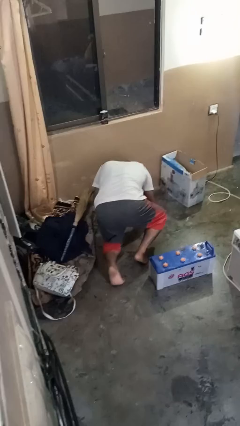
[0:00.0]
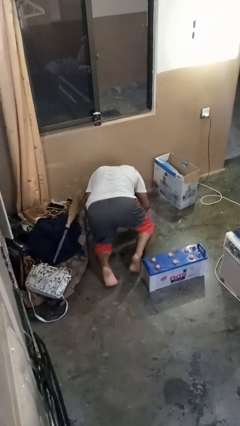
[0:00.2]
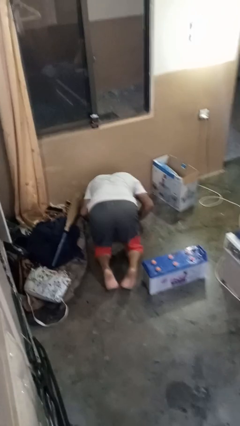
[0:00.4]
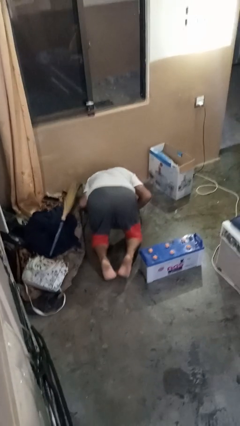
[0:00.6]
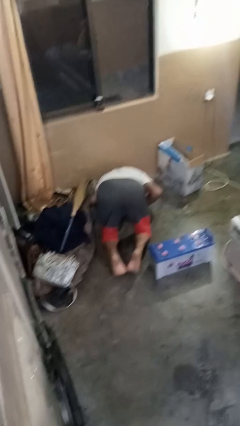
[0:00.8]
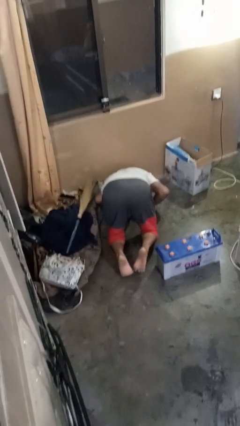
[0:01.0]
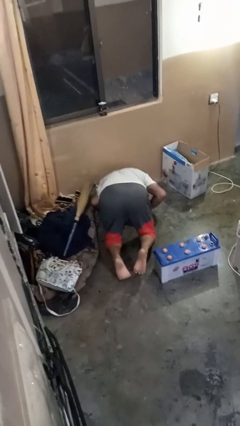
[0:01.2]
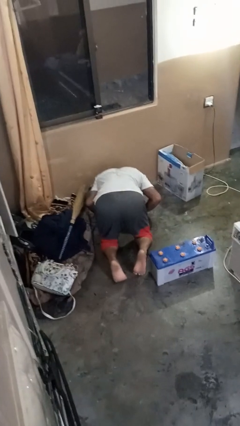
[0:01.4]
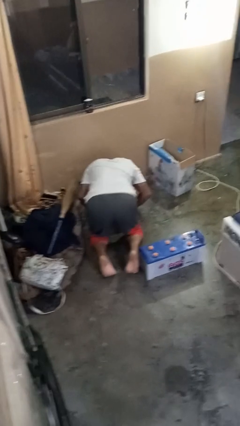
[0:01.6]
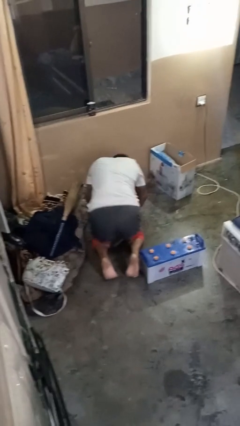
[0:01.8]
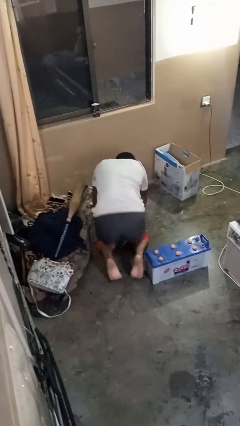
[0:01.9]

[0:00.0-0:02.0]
person lies down on floor

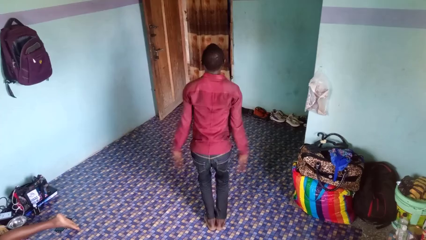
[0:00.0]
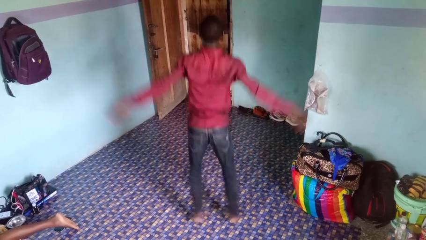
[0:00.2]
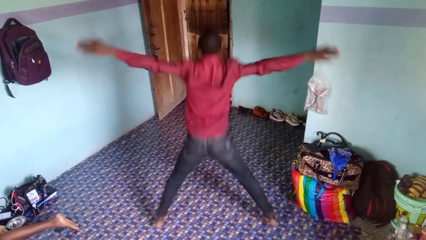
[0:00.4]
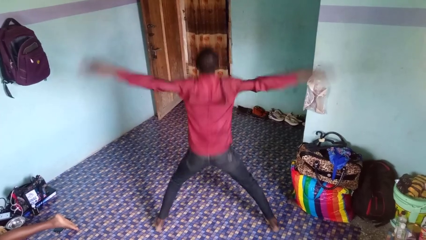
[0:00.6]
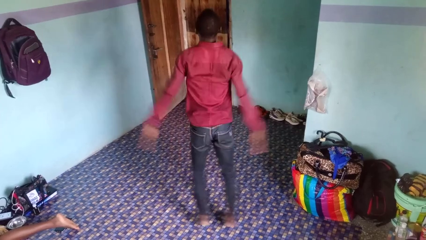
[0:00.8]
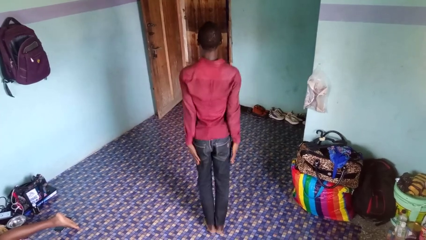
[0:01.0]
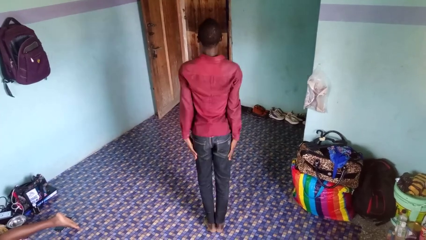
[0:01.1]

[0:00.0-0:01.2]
person exercises with jumping jacks

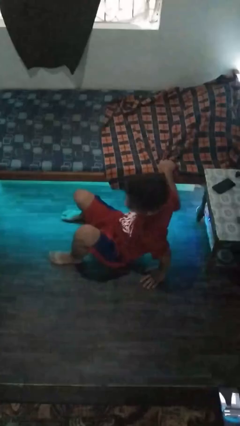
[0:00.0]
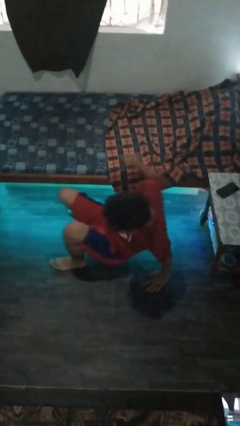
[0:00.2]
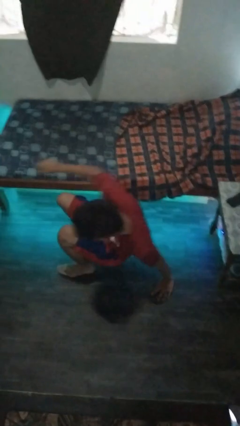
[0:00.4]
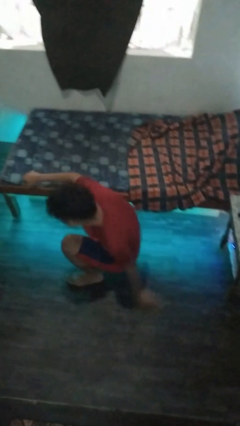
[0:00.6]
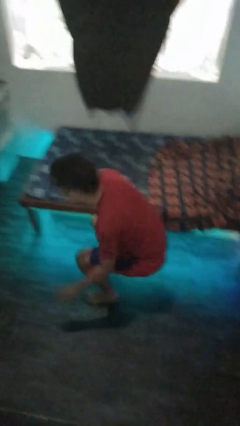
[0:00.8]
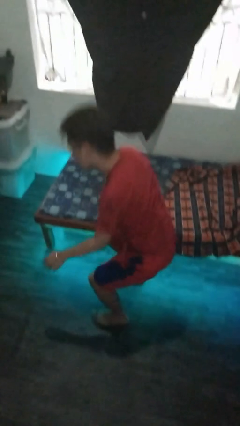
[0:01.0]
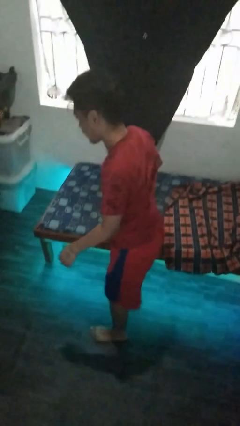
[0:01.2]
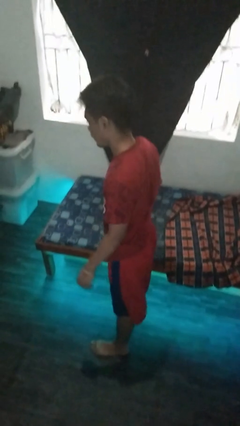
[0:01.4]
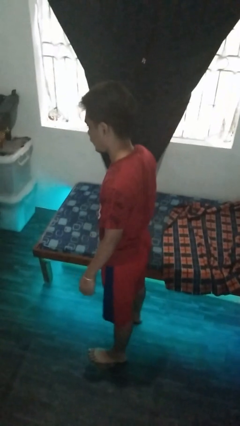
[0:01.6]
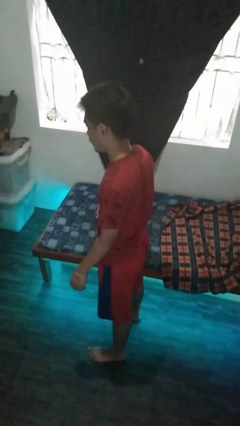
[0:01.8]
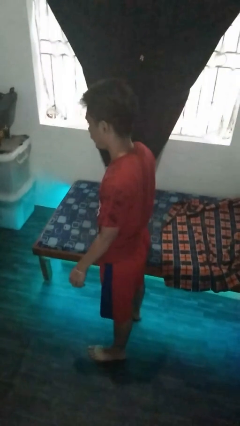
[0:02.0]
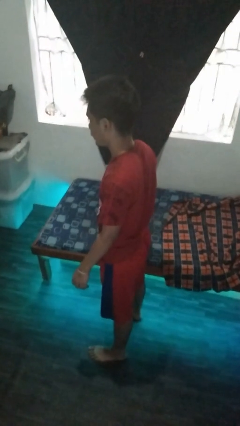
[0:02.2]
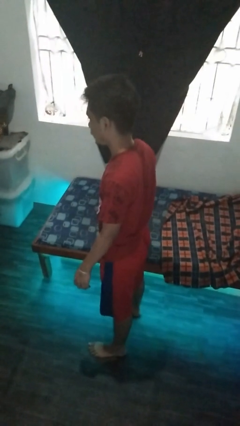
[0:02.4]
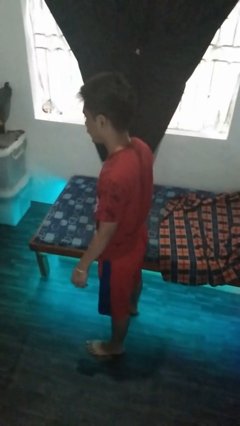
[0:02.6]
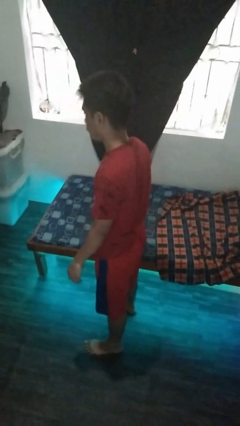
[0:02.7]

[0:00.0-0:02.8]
person stands up from floor

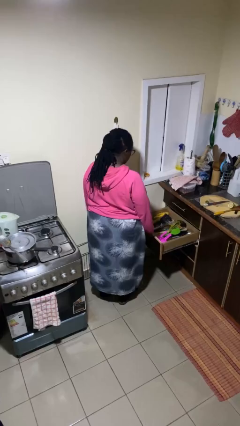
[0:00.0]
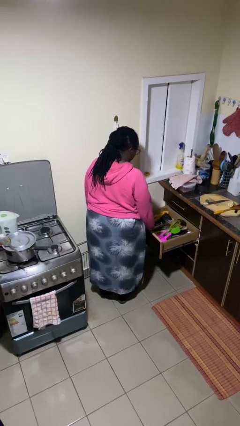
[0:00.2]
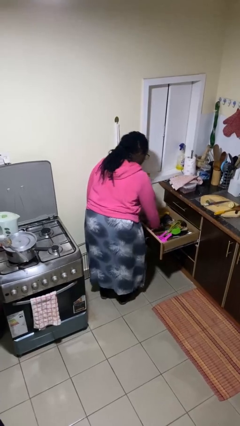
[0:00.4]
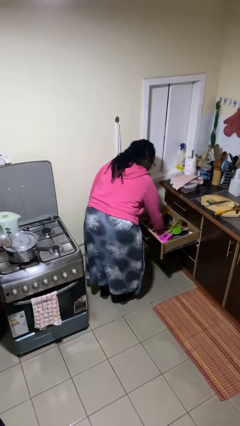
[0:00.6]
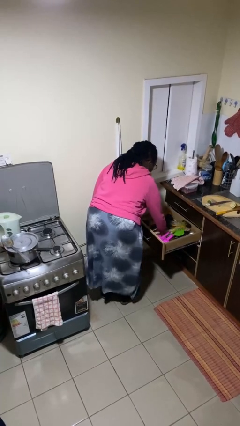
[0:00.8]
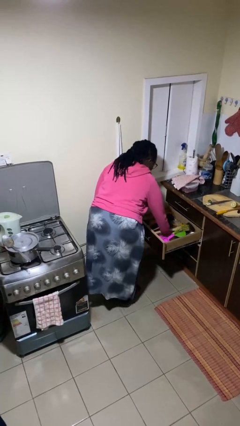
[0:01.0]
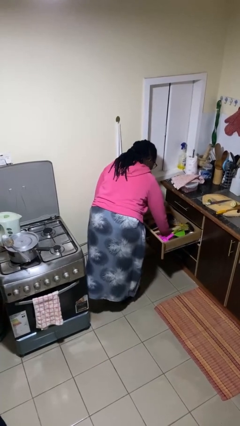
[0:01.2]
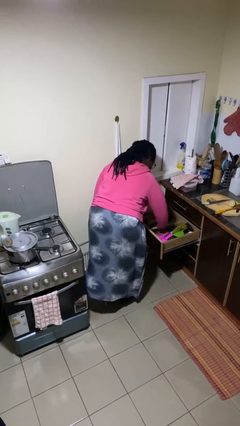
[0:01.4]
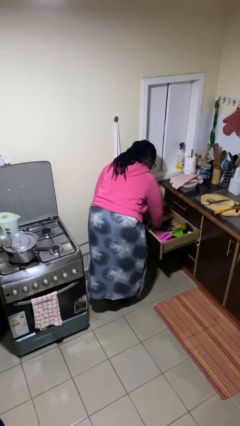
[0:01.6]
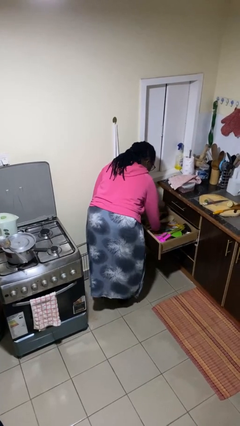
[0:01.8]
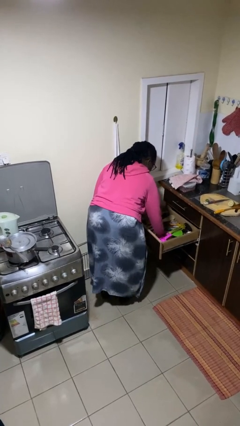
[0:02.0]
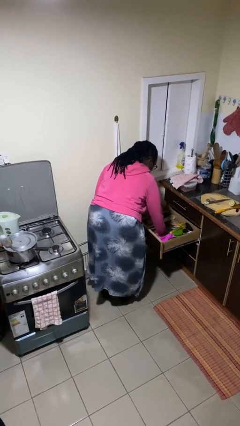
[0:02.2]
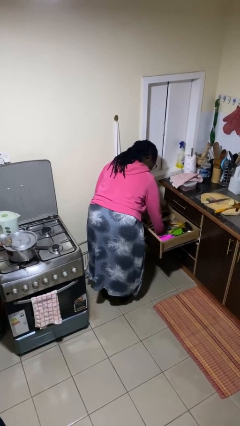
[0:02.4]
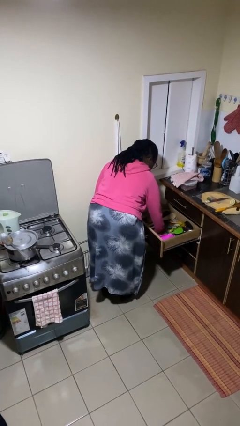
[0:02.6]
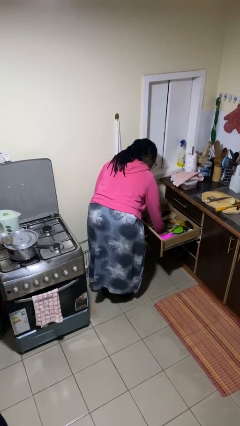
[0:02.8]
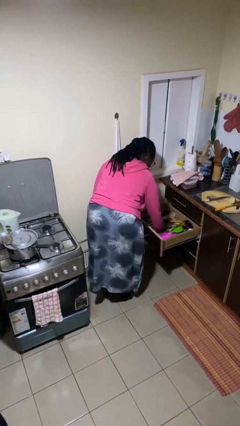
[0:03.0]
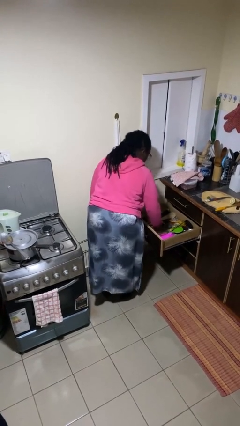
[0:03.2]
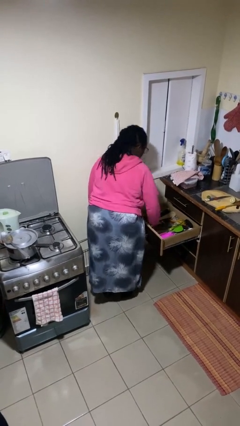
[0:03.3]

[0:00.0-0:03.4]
person searches in kitchen drawer

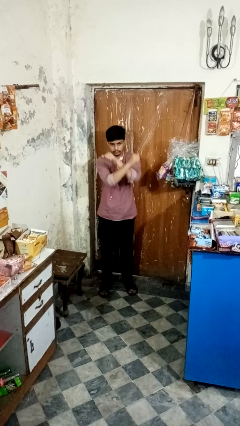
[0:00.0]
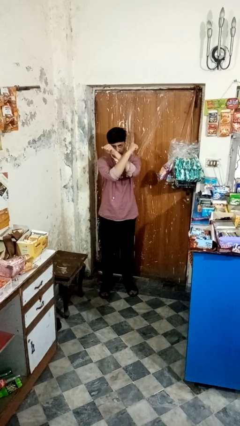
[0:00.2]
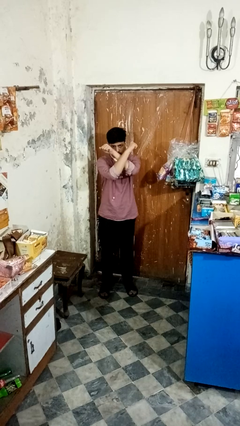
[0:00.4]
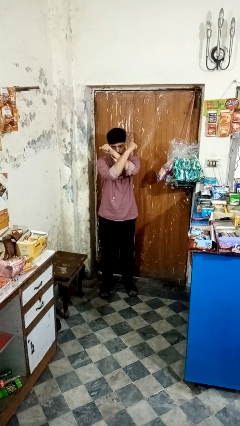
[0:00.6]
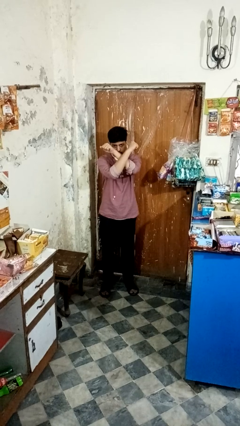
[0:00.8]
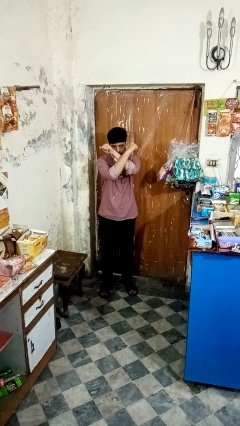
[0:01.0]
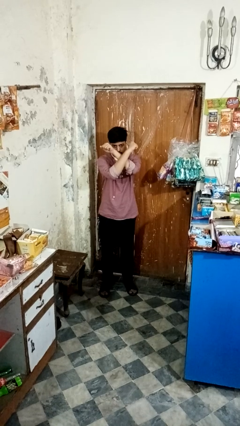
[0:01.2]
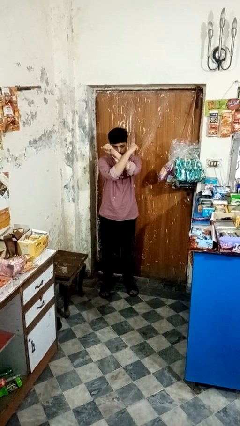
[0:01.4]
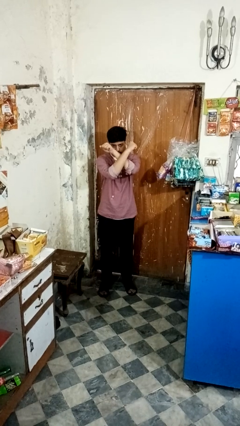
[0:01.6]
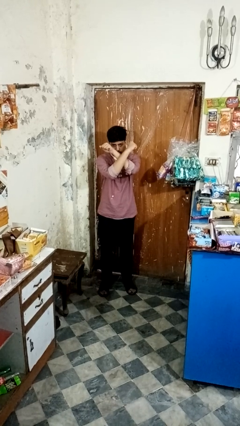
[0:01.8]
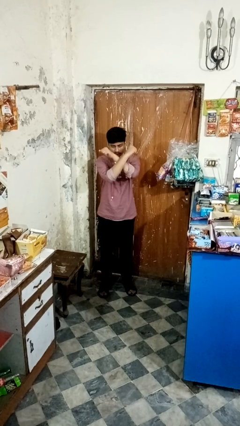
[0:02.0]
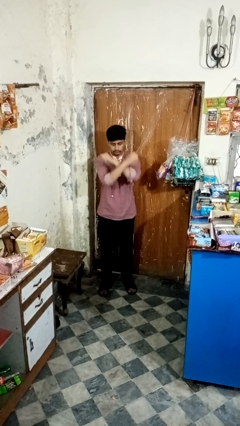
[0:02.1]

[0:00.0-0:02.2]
person gestures arms x

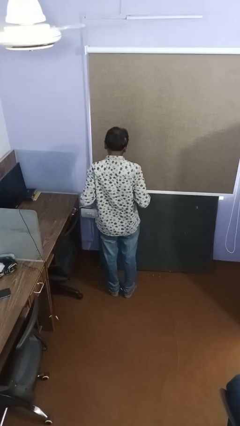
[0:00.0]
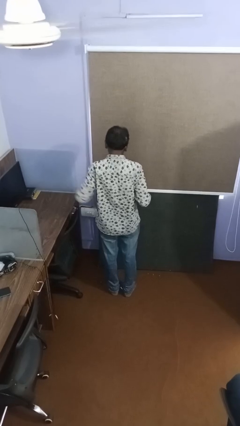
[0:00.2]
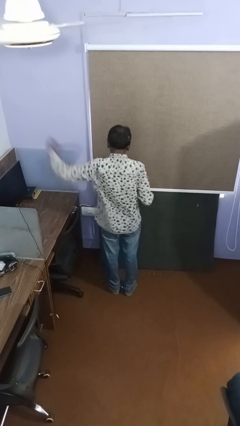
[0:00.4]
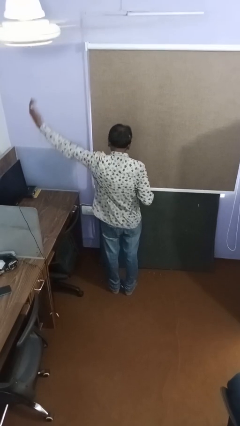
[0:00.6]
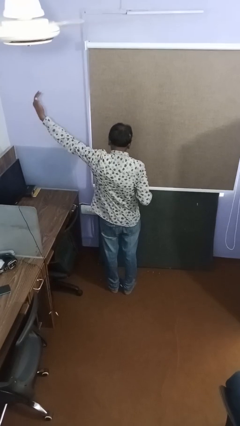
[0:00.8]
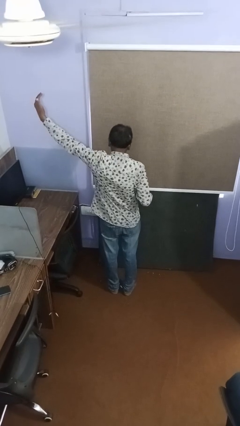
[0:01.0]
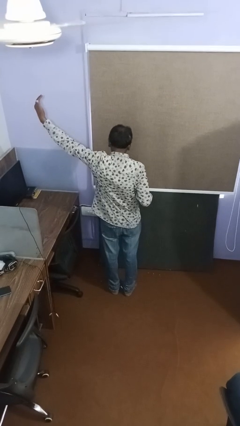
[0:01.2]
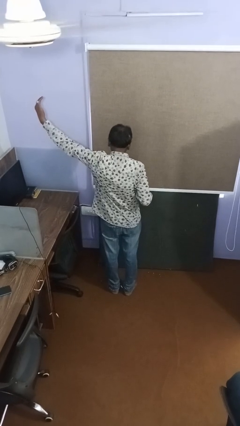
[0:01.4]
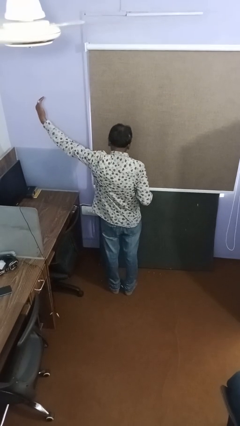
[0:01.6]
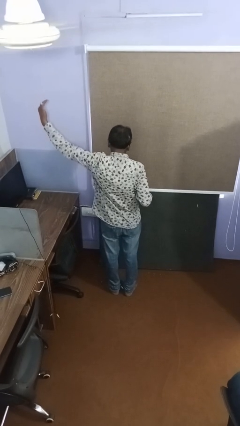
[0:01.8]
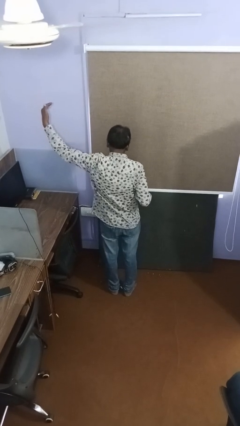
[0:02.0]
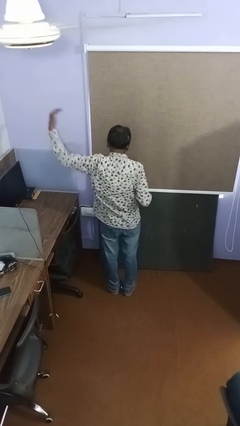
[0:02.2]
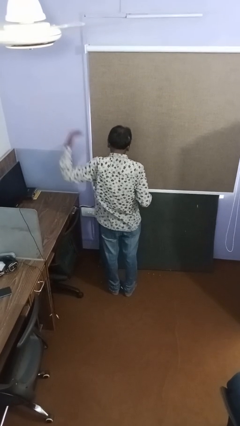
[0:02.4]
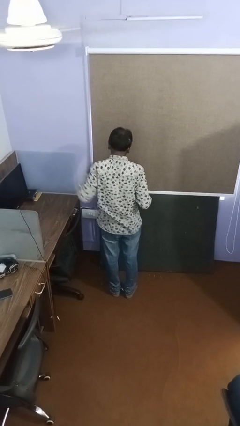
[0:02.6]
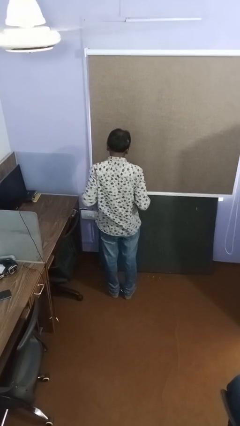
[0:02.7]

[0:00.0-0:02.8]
person gestures swipe left

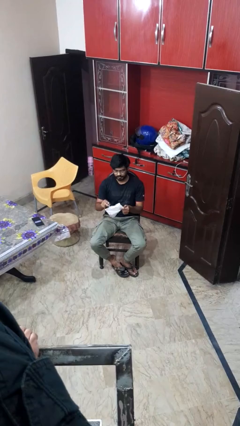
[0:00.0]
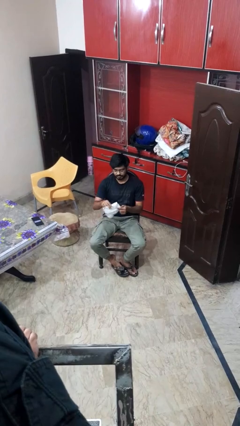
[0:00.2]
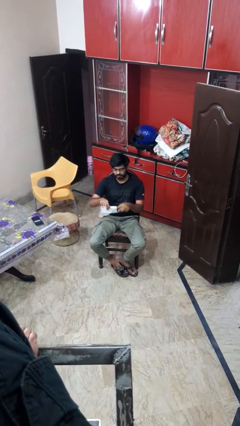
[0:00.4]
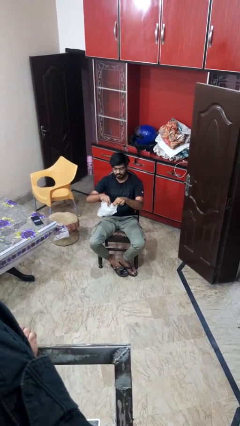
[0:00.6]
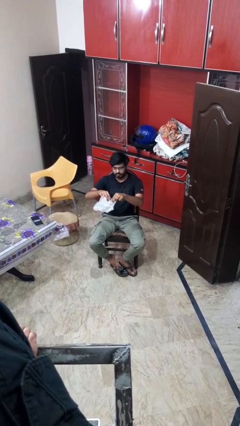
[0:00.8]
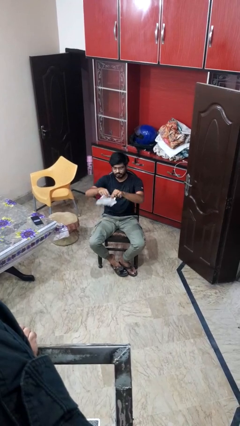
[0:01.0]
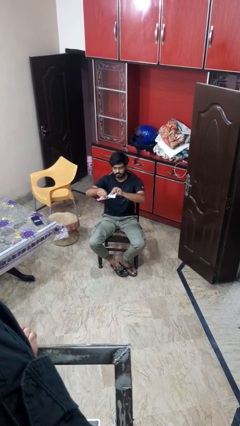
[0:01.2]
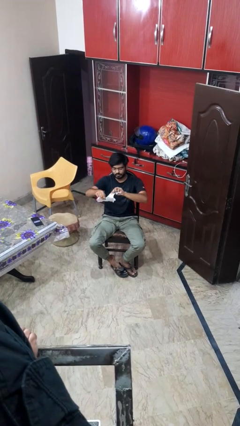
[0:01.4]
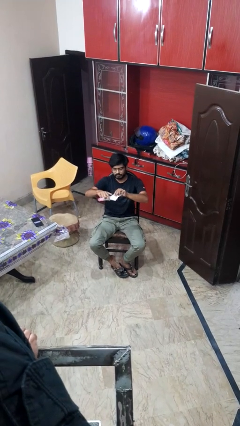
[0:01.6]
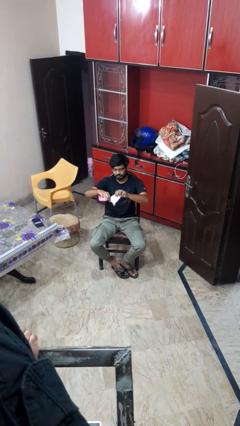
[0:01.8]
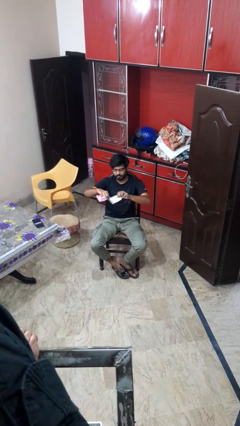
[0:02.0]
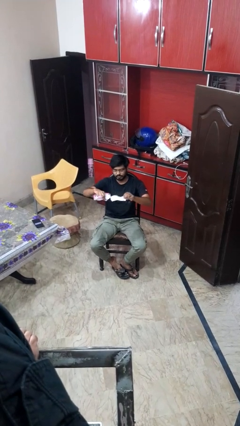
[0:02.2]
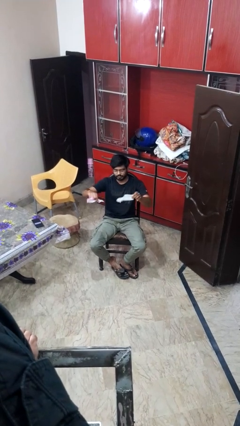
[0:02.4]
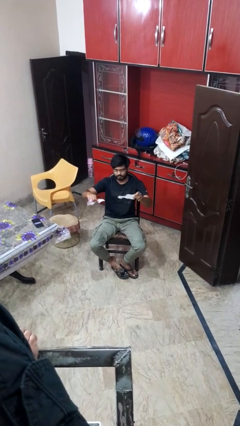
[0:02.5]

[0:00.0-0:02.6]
person tears paper

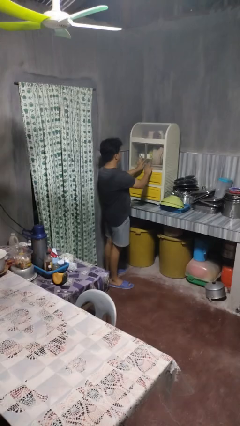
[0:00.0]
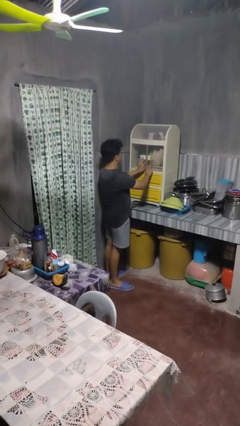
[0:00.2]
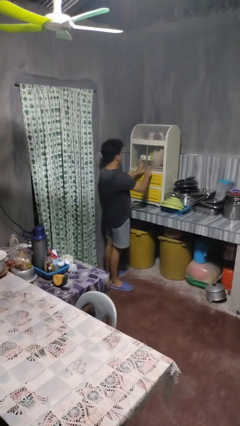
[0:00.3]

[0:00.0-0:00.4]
person closes cabinet
